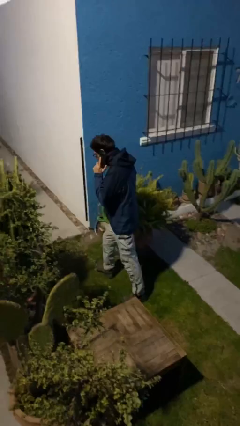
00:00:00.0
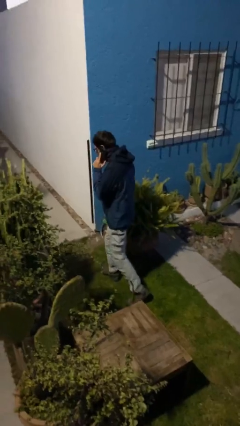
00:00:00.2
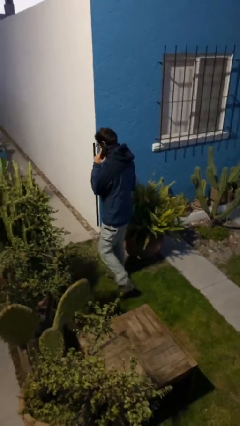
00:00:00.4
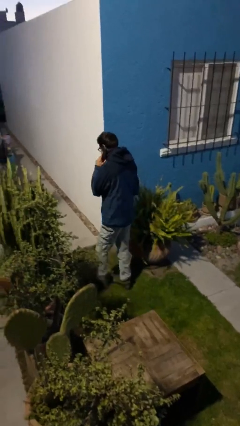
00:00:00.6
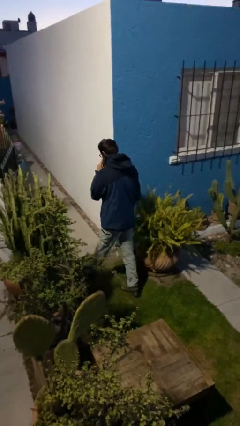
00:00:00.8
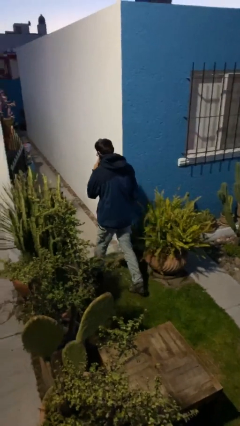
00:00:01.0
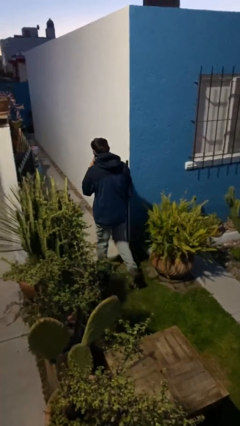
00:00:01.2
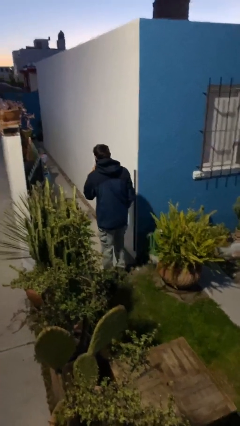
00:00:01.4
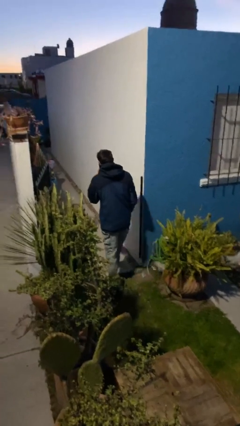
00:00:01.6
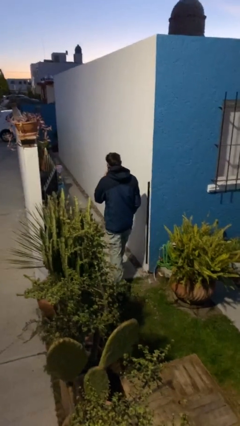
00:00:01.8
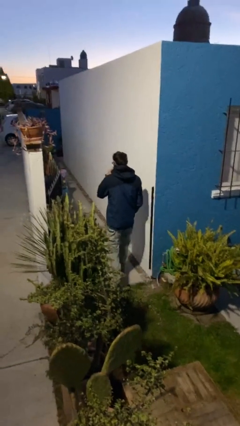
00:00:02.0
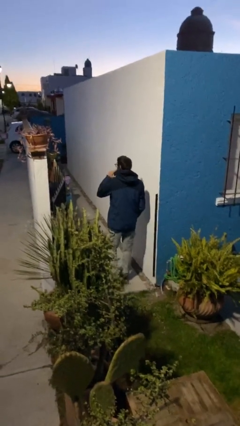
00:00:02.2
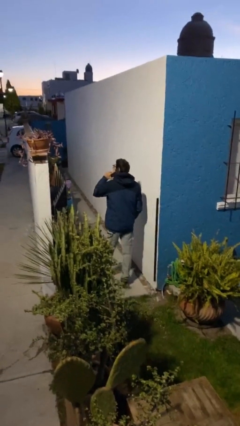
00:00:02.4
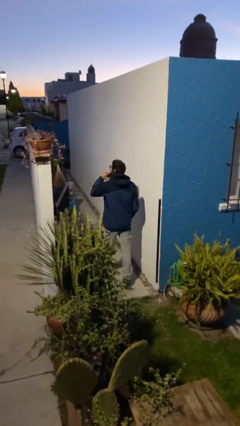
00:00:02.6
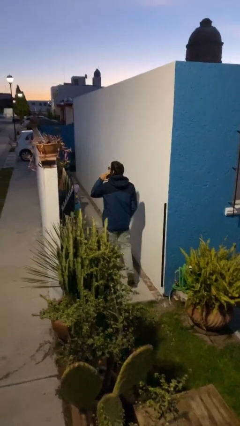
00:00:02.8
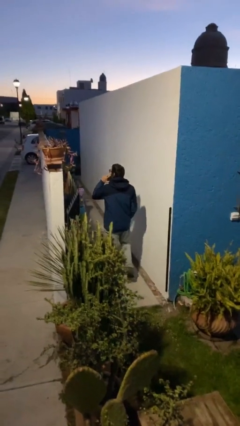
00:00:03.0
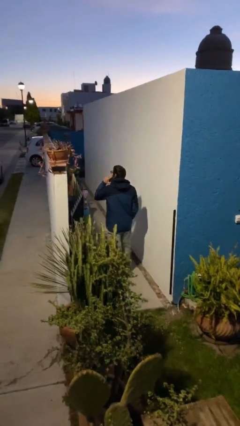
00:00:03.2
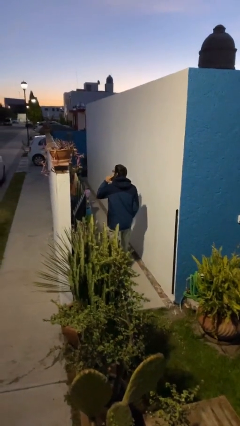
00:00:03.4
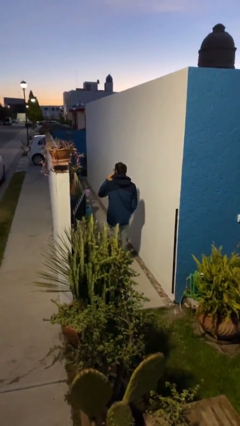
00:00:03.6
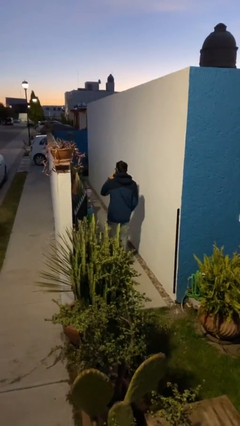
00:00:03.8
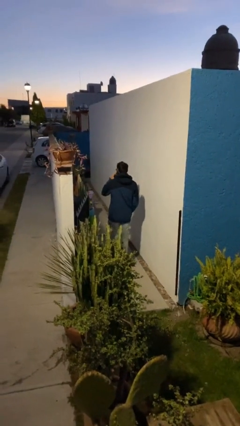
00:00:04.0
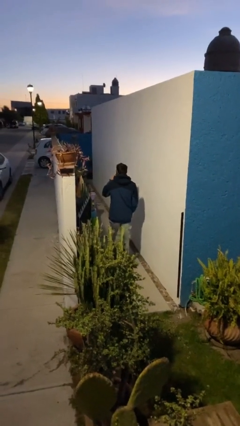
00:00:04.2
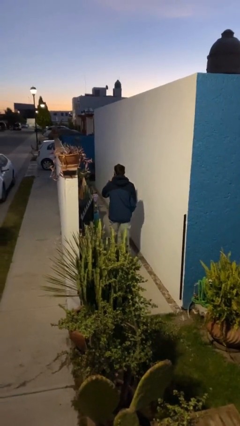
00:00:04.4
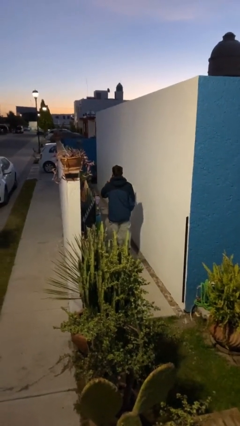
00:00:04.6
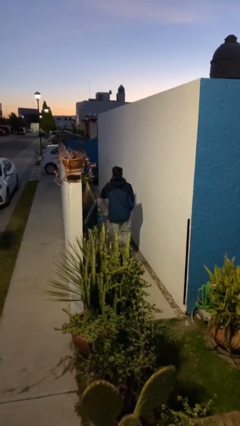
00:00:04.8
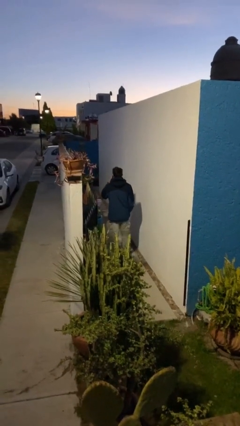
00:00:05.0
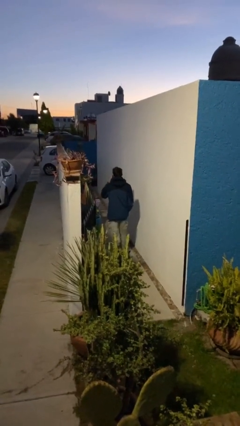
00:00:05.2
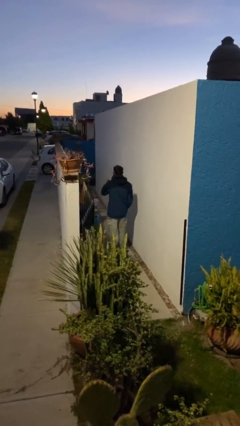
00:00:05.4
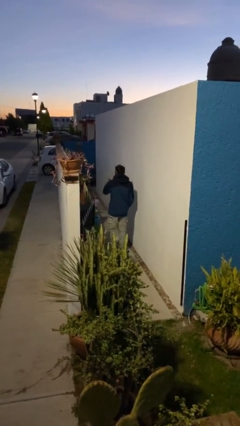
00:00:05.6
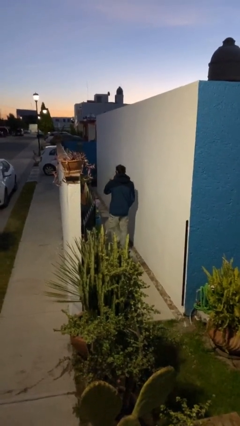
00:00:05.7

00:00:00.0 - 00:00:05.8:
person exits scene through structure

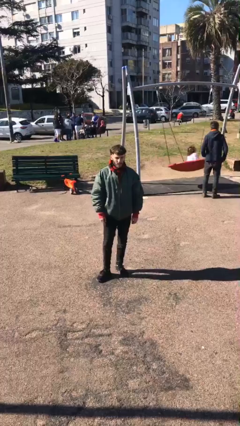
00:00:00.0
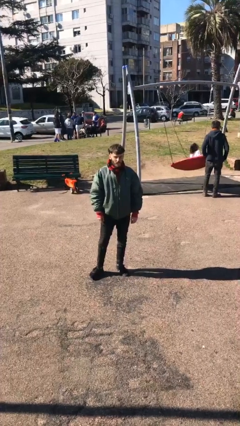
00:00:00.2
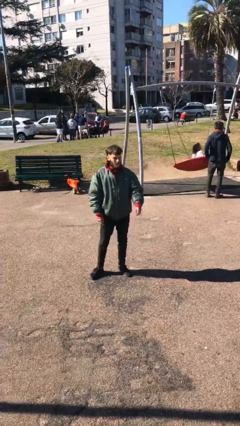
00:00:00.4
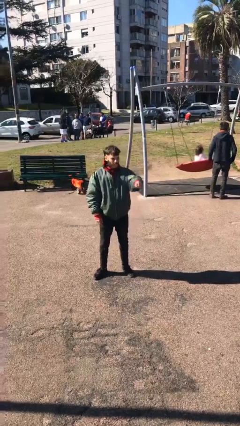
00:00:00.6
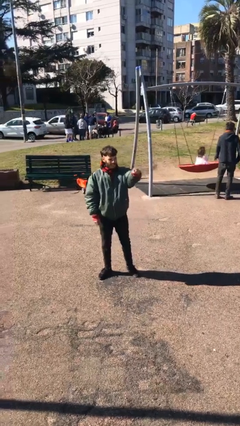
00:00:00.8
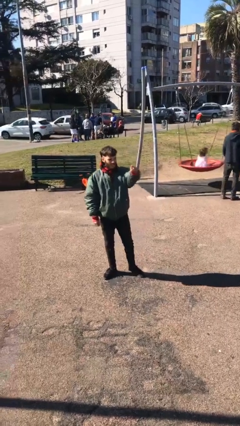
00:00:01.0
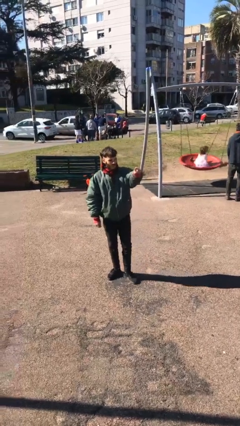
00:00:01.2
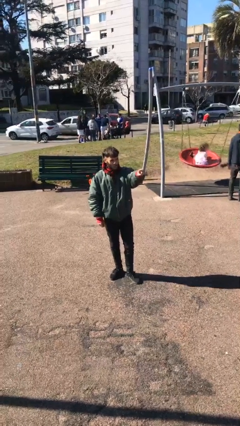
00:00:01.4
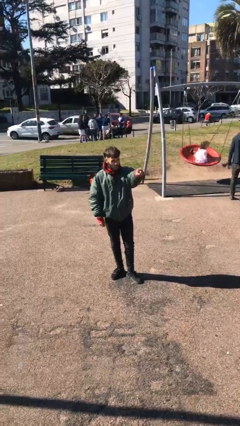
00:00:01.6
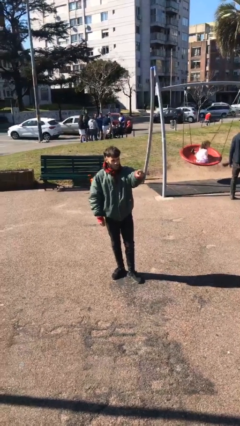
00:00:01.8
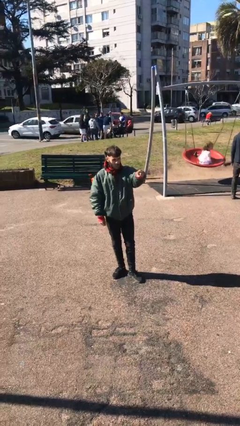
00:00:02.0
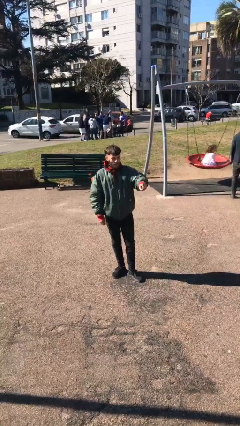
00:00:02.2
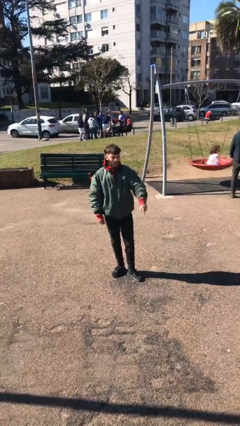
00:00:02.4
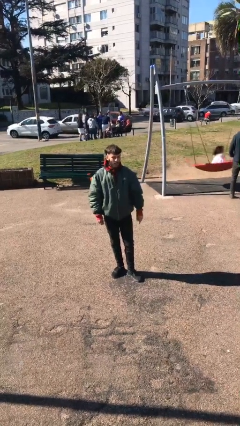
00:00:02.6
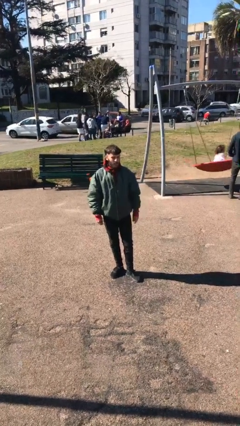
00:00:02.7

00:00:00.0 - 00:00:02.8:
person points at person

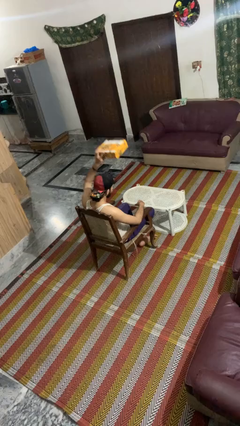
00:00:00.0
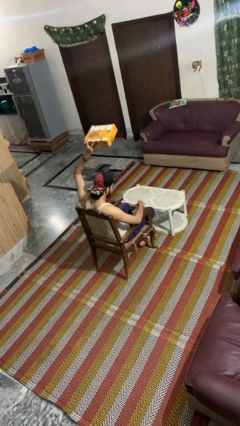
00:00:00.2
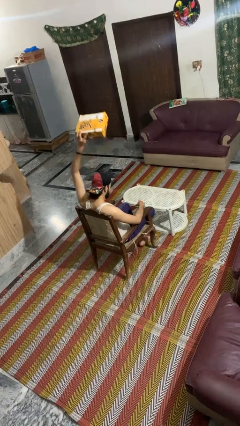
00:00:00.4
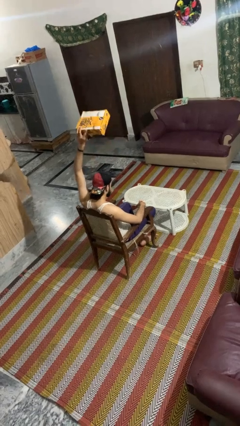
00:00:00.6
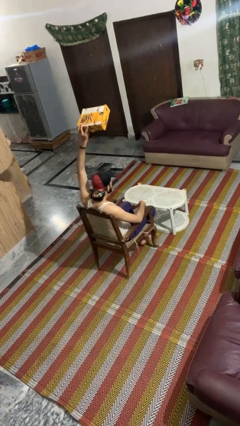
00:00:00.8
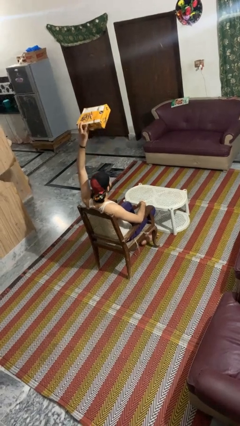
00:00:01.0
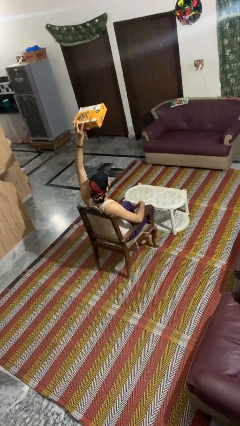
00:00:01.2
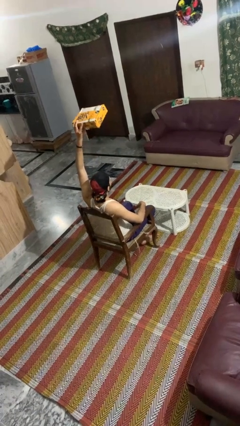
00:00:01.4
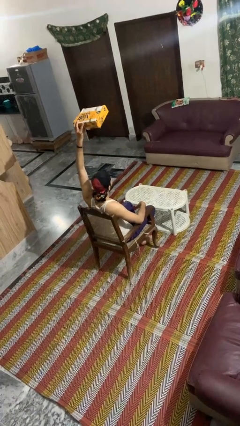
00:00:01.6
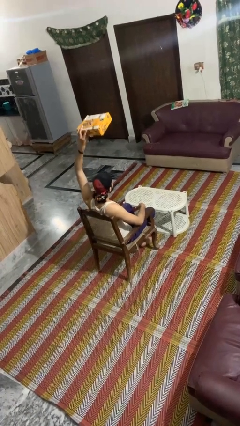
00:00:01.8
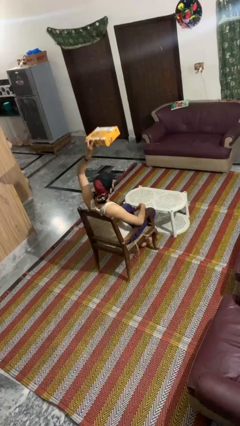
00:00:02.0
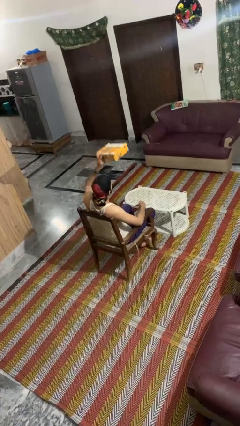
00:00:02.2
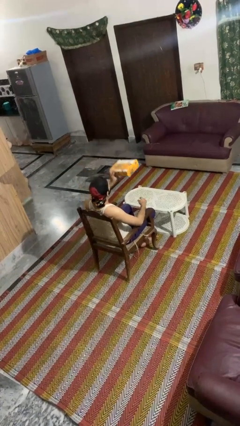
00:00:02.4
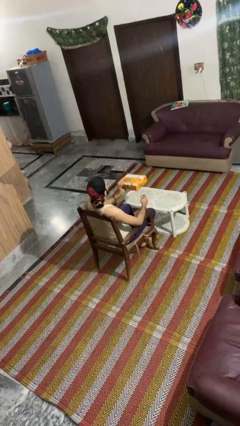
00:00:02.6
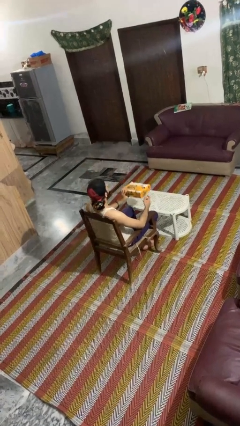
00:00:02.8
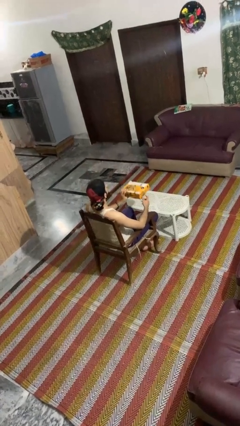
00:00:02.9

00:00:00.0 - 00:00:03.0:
person holds object above head

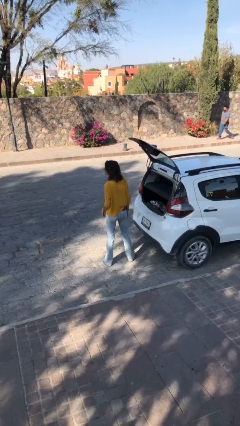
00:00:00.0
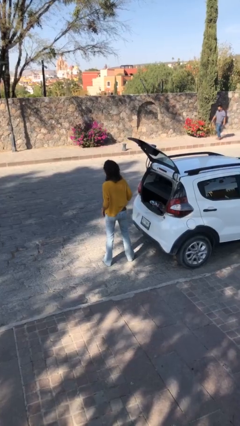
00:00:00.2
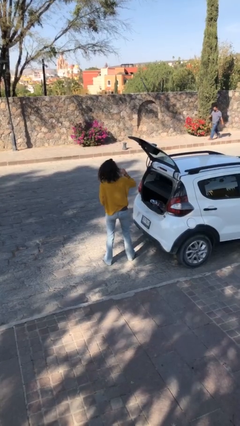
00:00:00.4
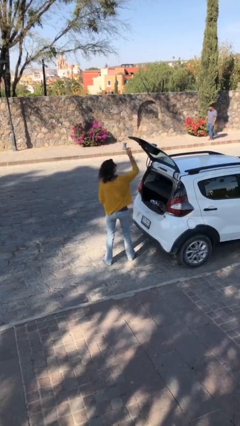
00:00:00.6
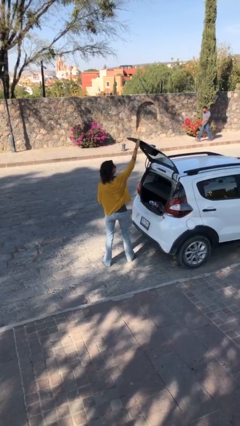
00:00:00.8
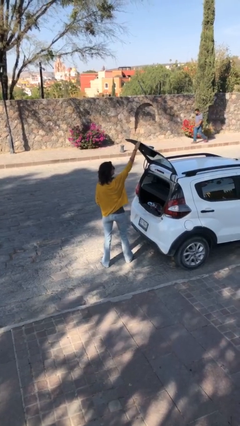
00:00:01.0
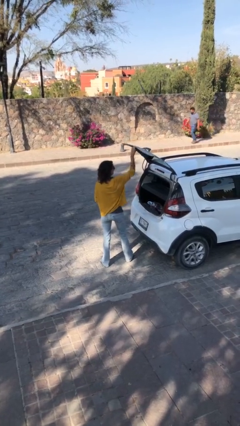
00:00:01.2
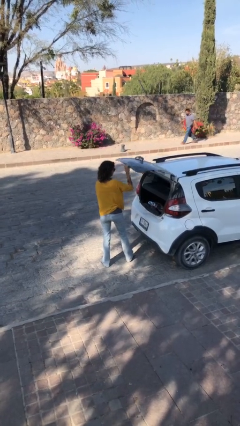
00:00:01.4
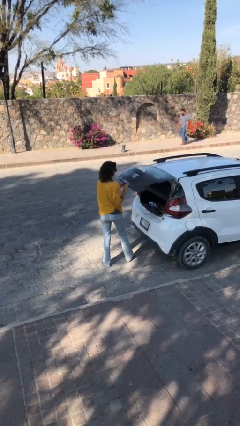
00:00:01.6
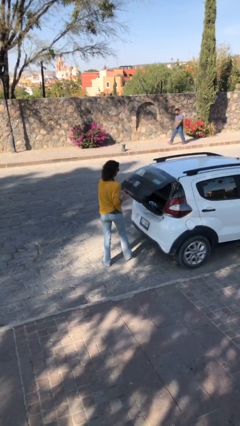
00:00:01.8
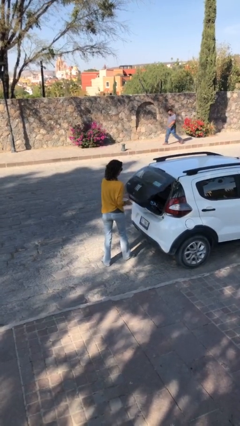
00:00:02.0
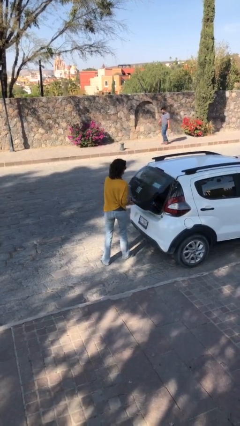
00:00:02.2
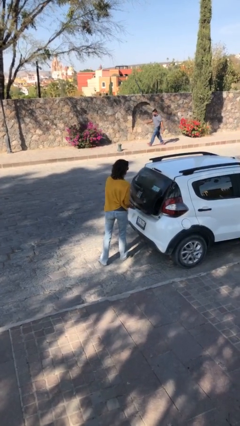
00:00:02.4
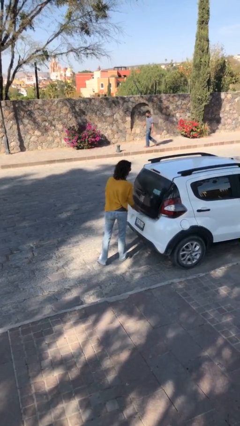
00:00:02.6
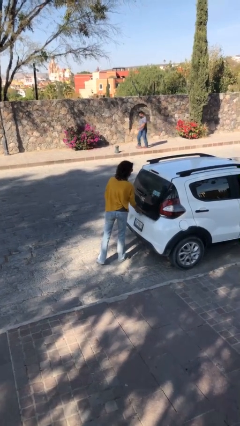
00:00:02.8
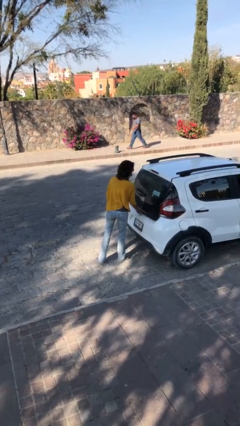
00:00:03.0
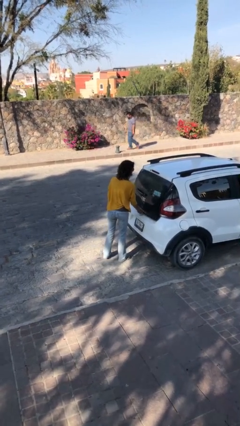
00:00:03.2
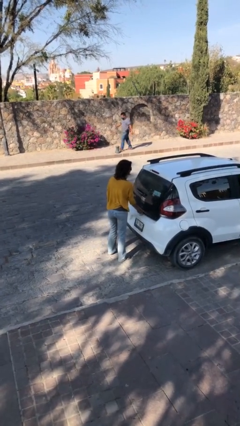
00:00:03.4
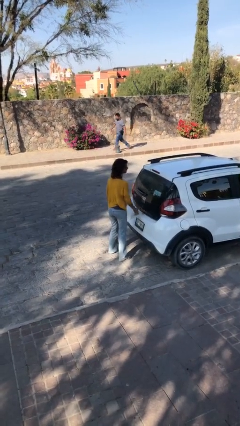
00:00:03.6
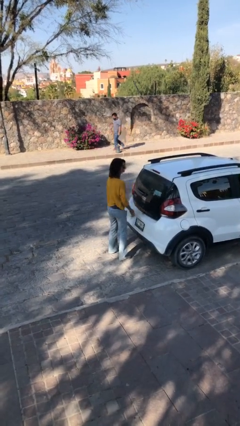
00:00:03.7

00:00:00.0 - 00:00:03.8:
person closes car trunk

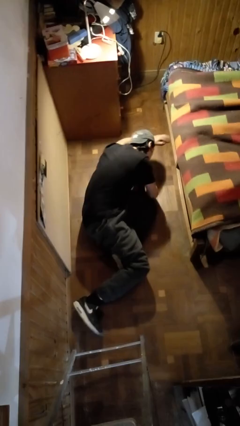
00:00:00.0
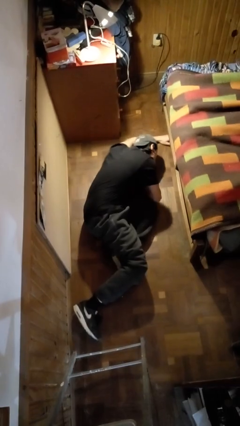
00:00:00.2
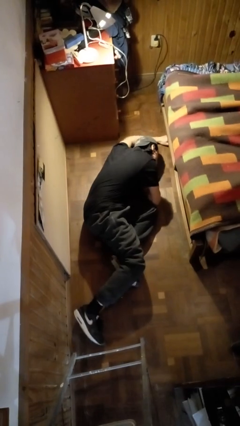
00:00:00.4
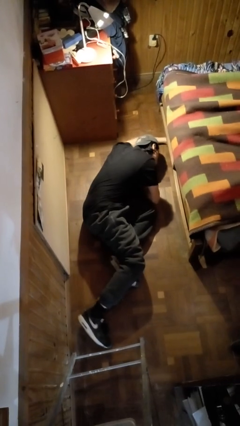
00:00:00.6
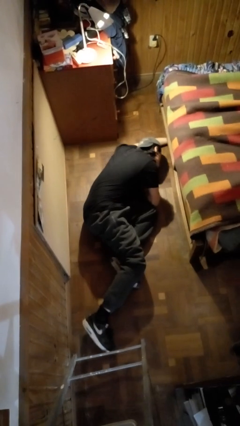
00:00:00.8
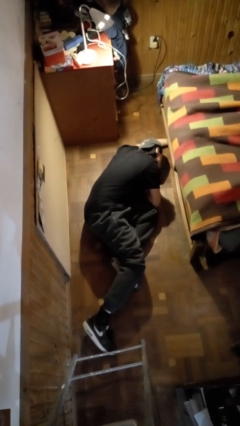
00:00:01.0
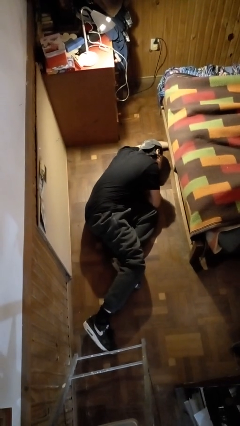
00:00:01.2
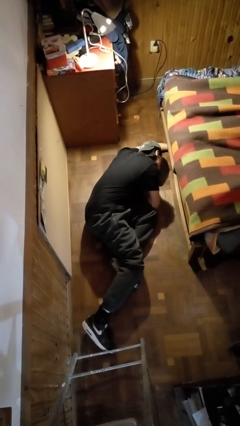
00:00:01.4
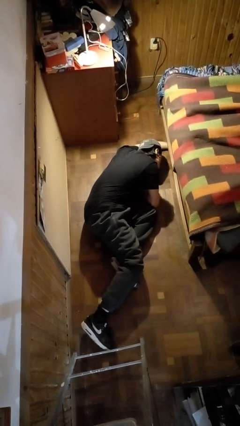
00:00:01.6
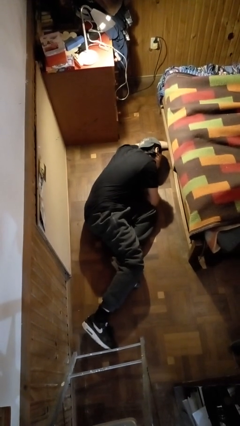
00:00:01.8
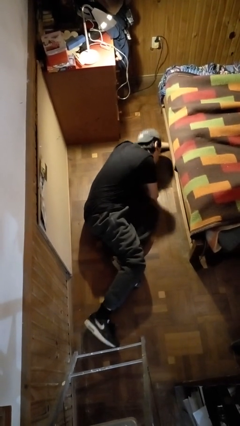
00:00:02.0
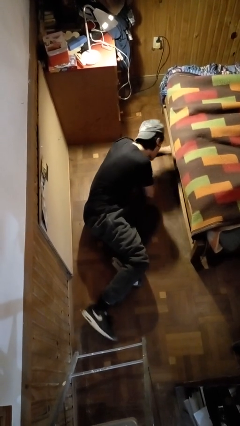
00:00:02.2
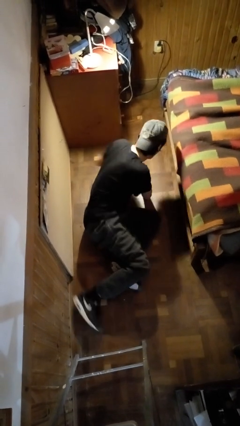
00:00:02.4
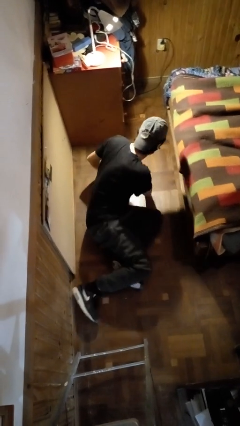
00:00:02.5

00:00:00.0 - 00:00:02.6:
person searches under bed
